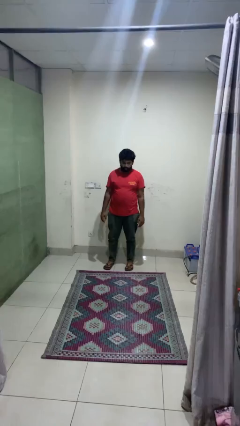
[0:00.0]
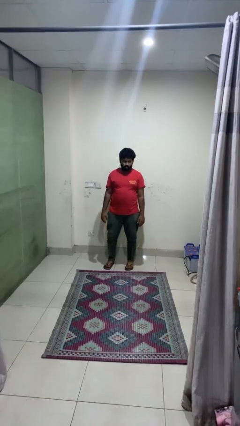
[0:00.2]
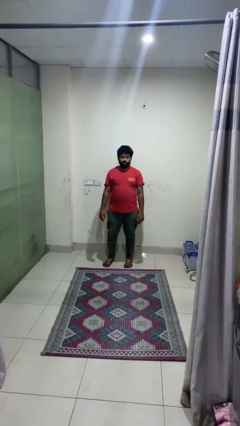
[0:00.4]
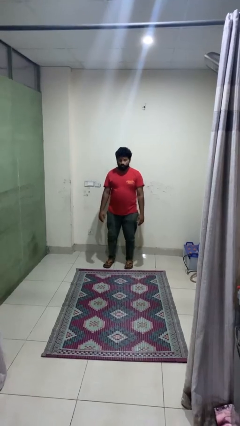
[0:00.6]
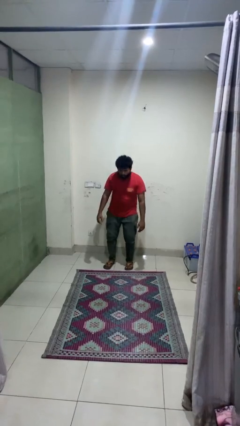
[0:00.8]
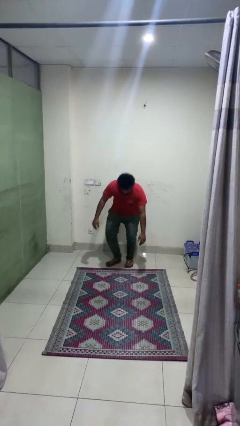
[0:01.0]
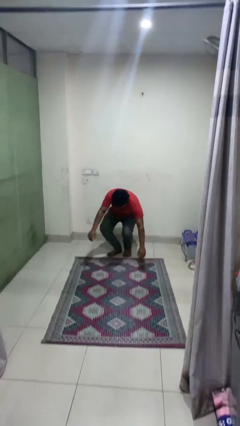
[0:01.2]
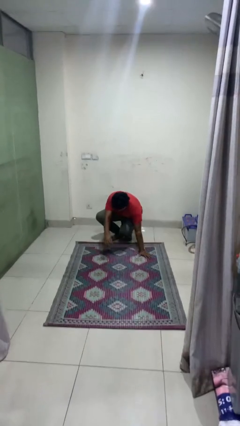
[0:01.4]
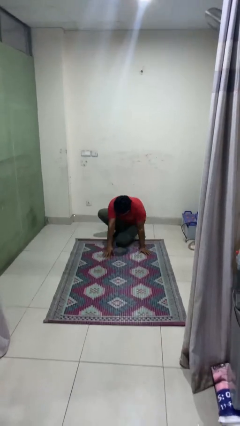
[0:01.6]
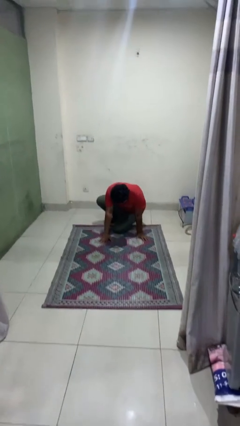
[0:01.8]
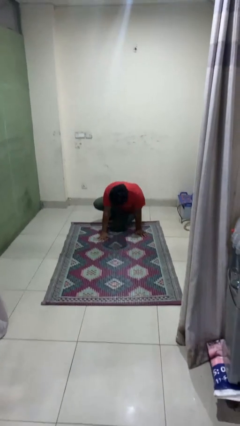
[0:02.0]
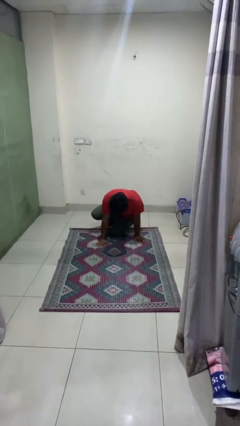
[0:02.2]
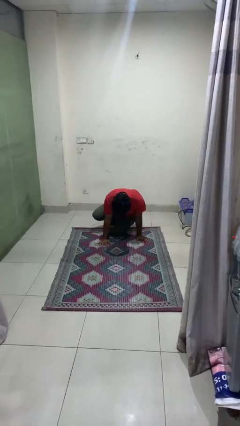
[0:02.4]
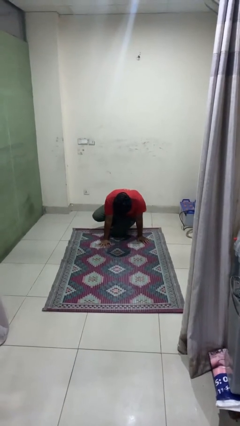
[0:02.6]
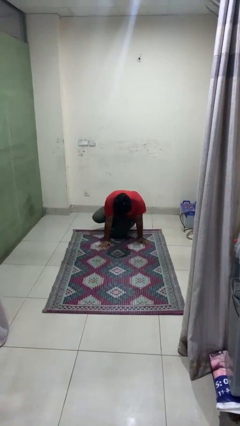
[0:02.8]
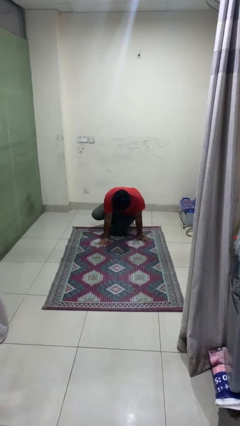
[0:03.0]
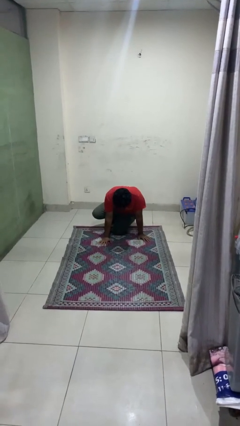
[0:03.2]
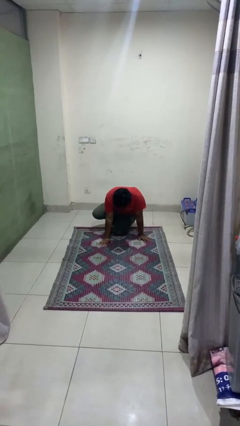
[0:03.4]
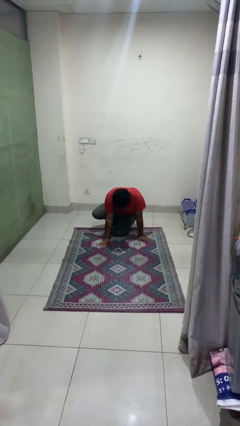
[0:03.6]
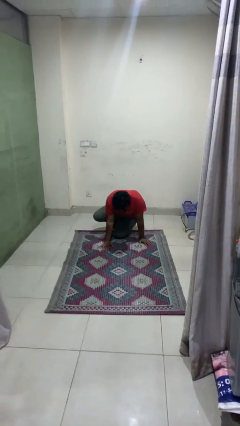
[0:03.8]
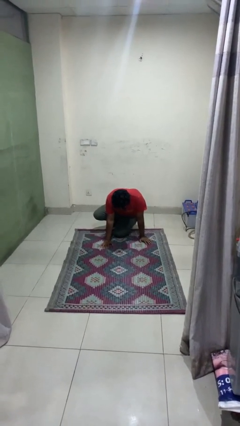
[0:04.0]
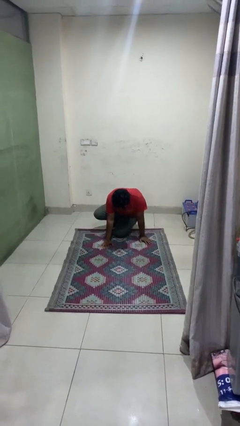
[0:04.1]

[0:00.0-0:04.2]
person falls while standing

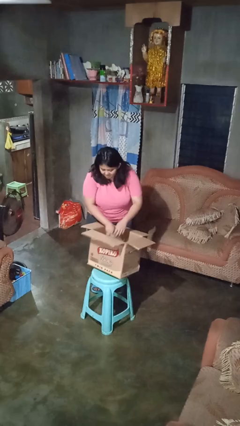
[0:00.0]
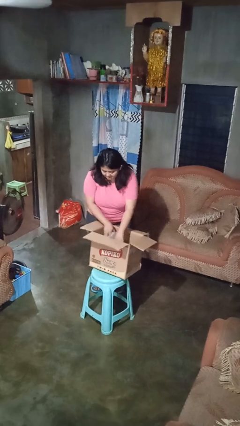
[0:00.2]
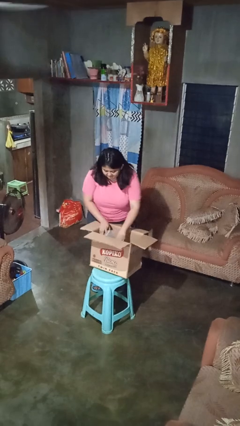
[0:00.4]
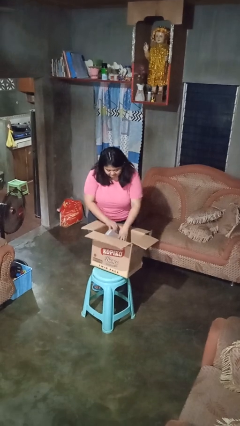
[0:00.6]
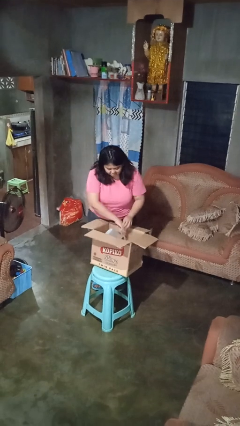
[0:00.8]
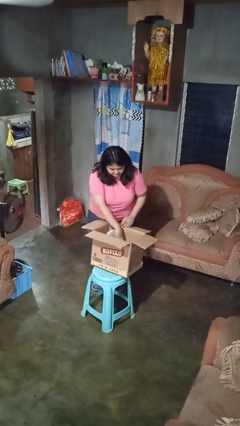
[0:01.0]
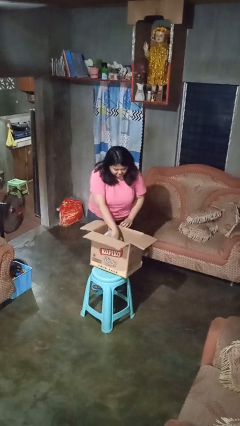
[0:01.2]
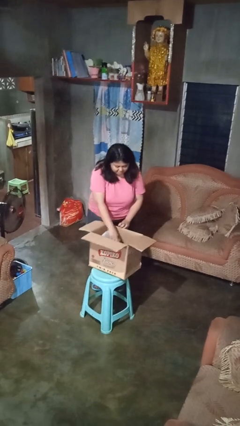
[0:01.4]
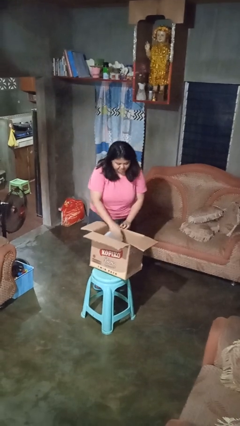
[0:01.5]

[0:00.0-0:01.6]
person searches in box

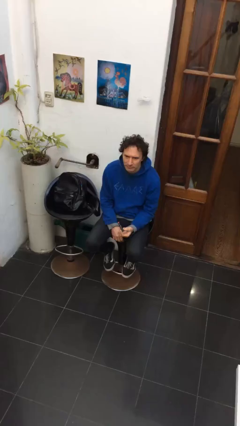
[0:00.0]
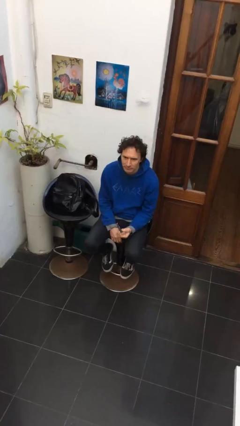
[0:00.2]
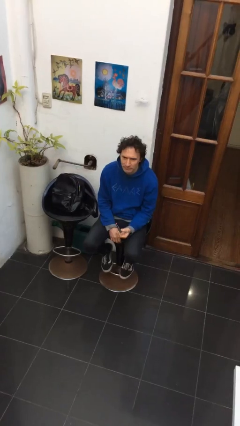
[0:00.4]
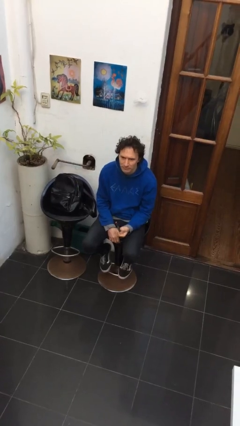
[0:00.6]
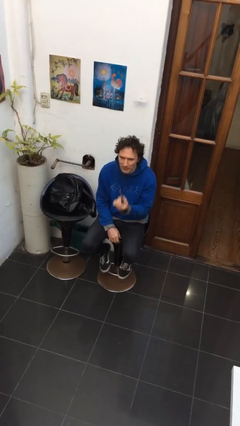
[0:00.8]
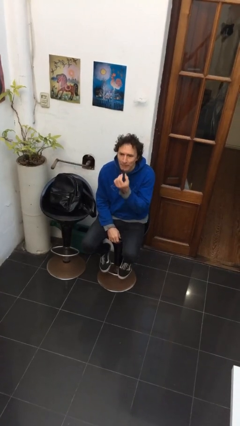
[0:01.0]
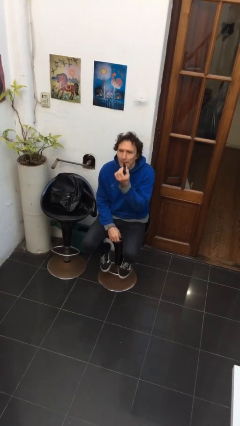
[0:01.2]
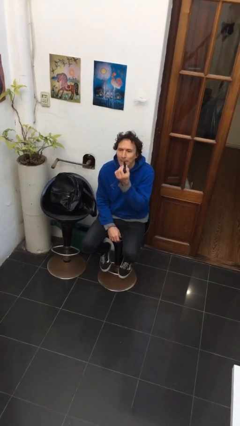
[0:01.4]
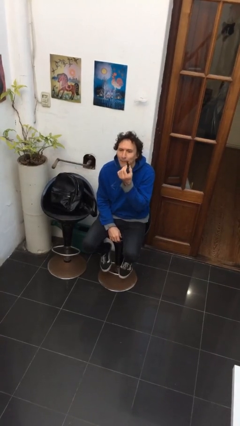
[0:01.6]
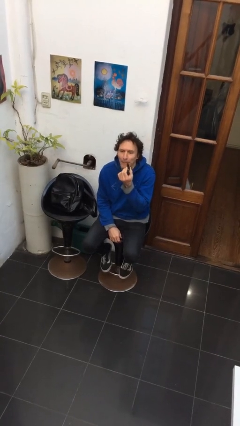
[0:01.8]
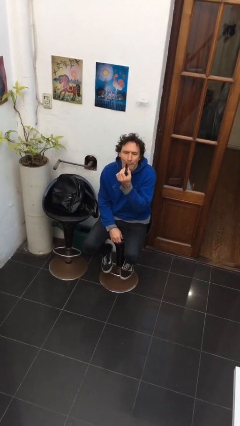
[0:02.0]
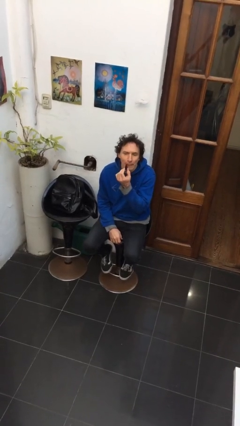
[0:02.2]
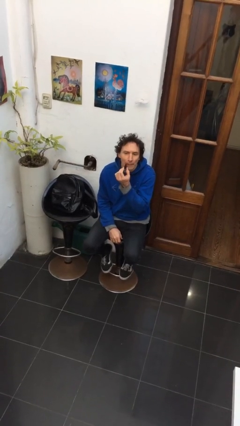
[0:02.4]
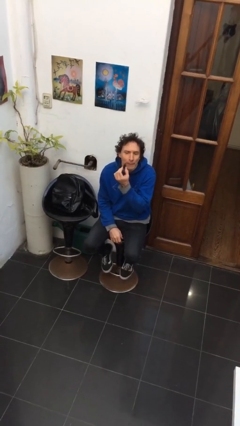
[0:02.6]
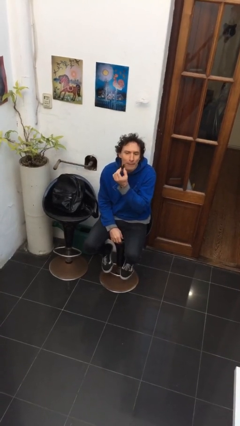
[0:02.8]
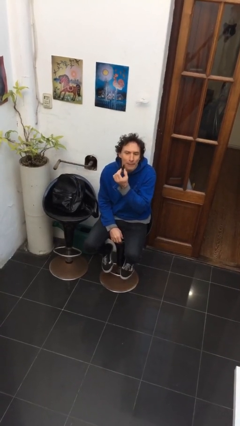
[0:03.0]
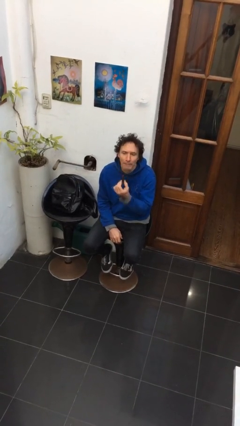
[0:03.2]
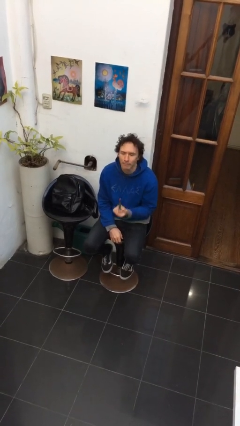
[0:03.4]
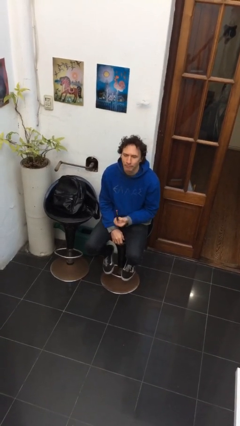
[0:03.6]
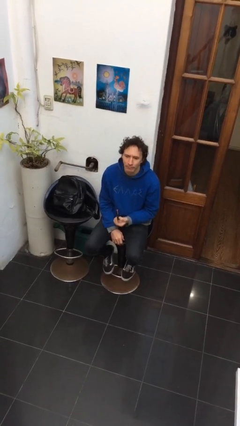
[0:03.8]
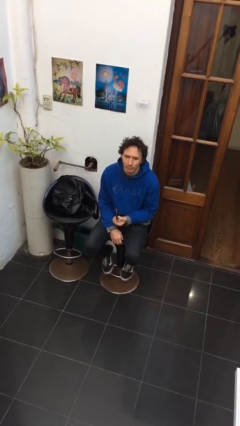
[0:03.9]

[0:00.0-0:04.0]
person applies lip makeup

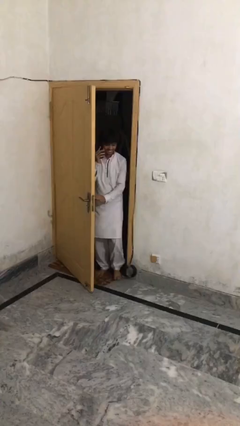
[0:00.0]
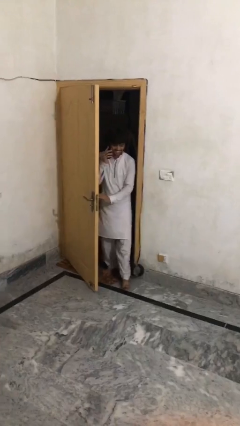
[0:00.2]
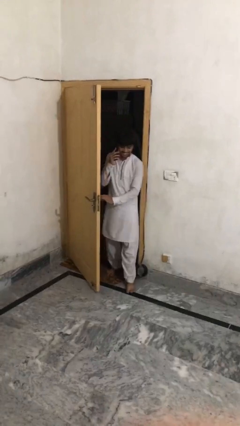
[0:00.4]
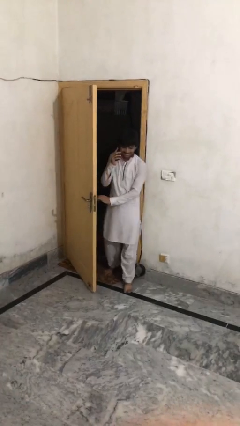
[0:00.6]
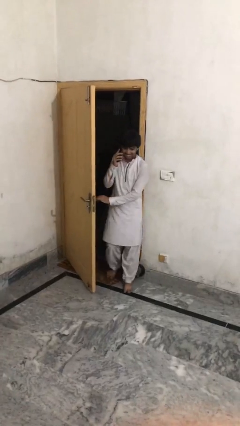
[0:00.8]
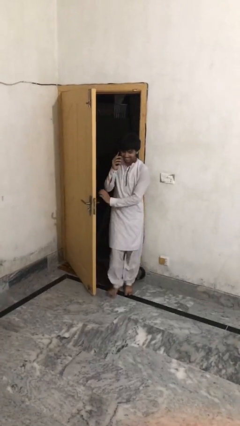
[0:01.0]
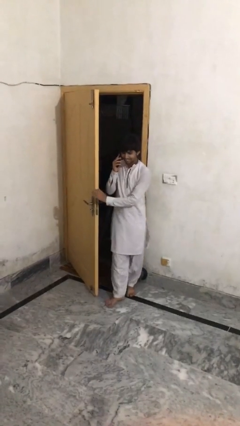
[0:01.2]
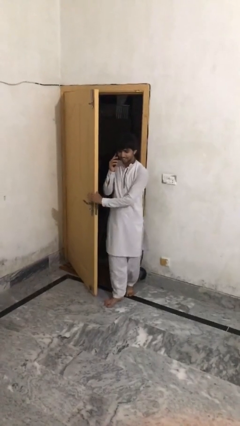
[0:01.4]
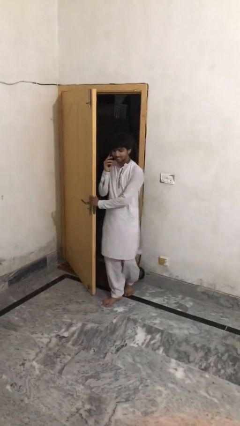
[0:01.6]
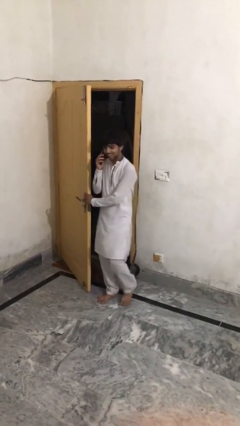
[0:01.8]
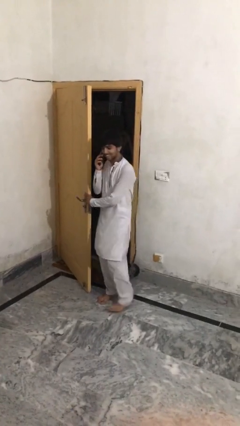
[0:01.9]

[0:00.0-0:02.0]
person enters scene through structure

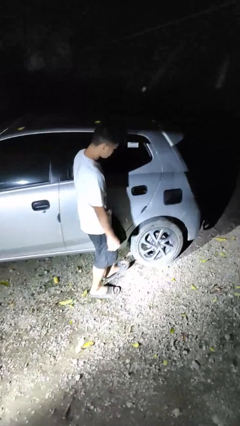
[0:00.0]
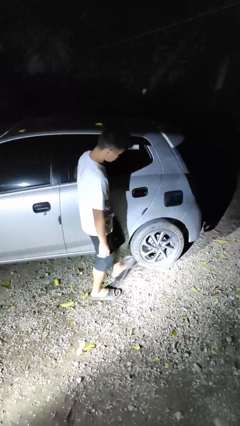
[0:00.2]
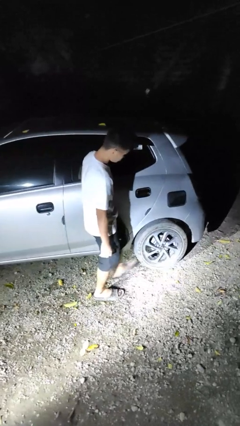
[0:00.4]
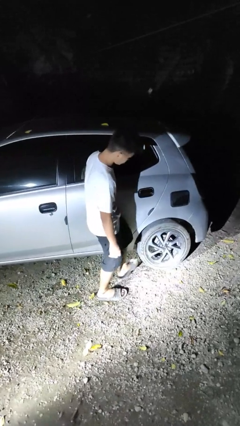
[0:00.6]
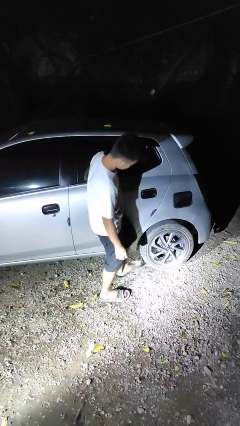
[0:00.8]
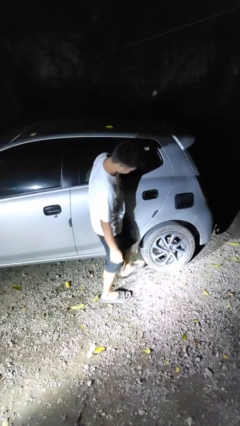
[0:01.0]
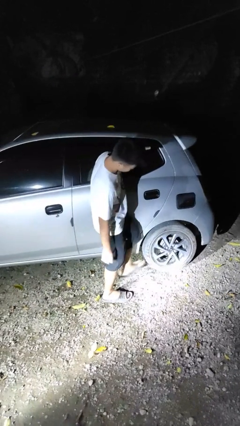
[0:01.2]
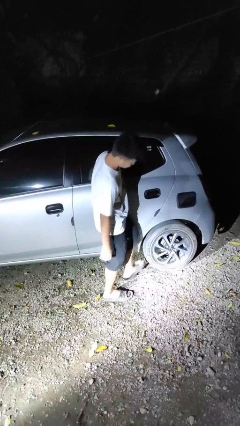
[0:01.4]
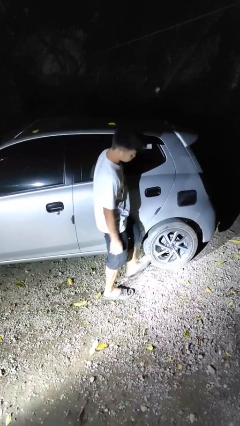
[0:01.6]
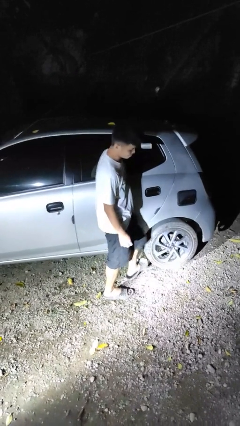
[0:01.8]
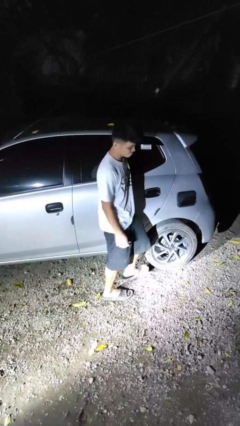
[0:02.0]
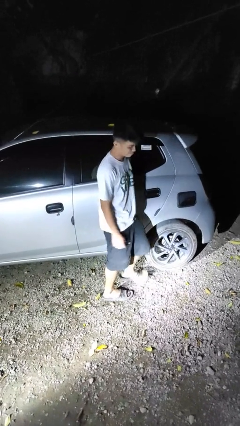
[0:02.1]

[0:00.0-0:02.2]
person kicks car tires

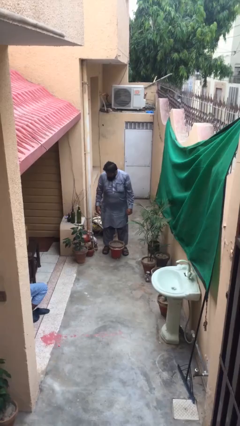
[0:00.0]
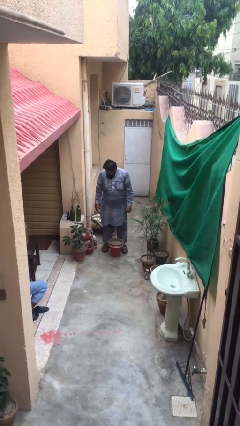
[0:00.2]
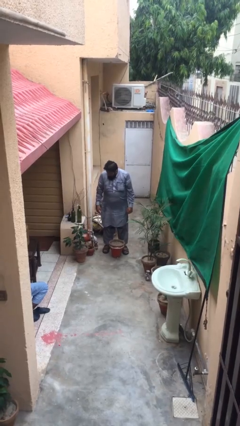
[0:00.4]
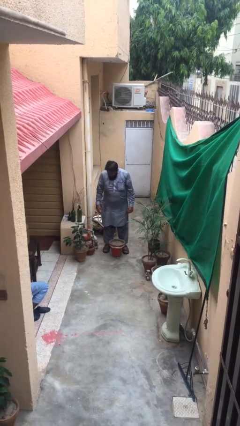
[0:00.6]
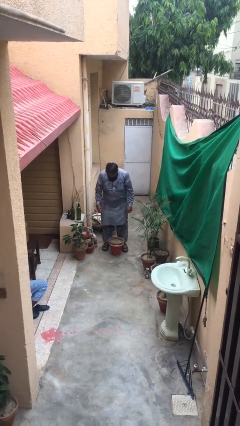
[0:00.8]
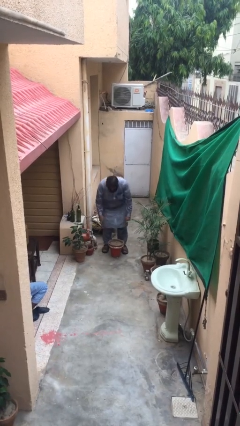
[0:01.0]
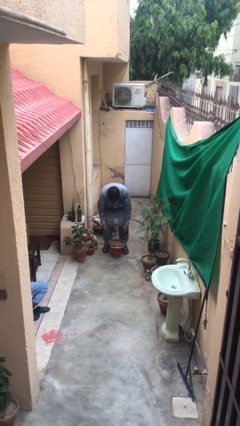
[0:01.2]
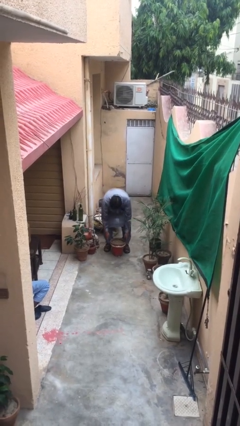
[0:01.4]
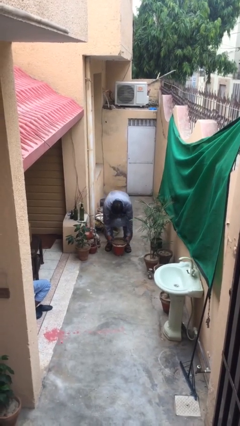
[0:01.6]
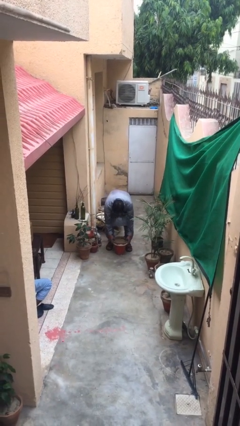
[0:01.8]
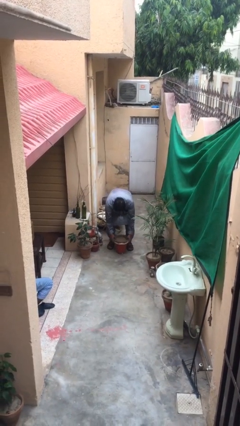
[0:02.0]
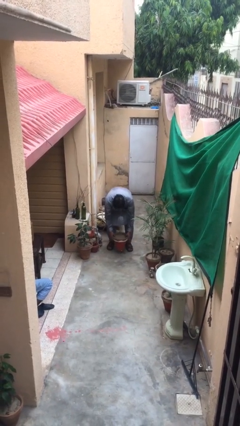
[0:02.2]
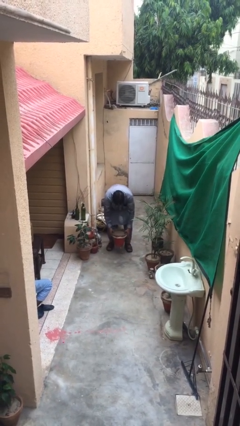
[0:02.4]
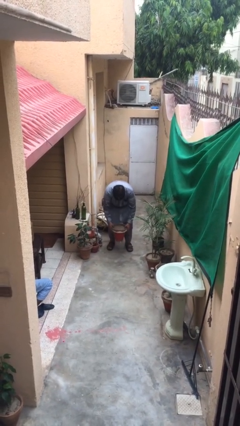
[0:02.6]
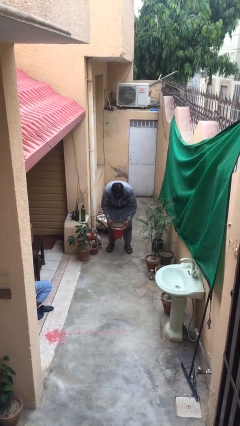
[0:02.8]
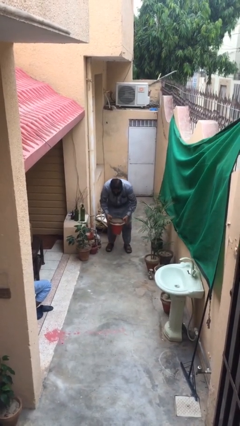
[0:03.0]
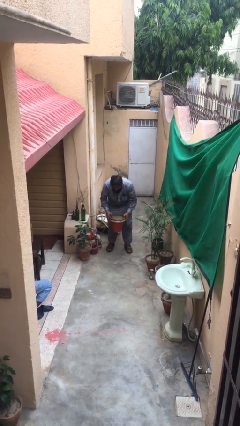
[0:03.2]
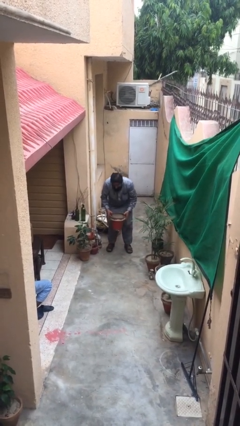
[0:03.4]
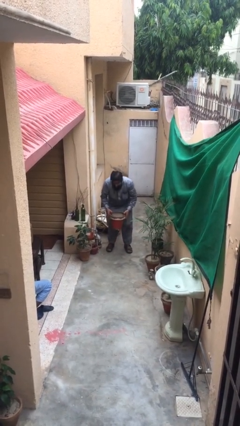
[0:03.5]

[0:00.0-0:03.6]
person picks up object from floor
